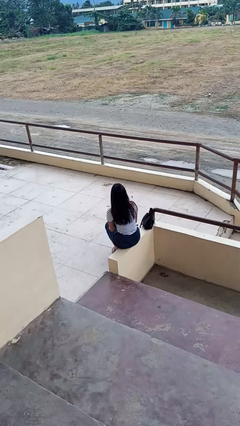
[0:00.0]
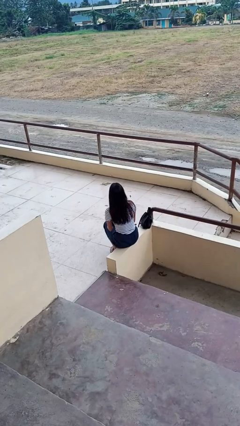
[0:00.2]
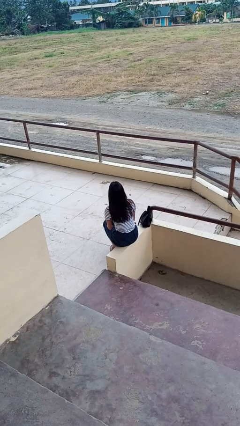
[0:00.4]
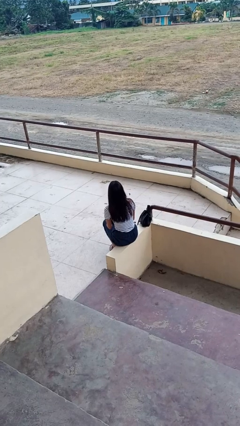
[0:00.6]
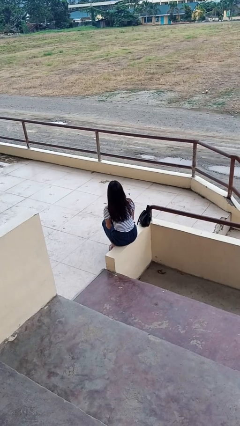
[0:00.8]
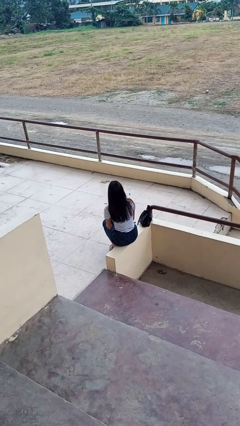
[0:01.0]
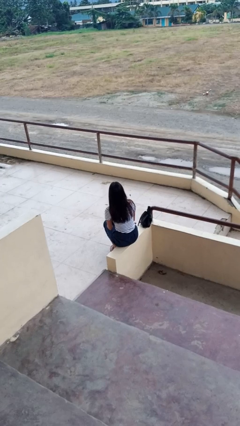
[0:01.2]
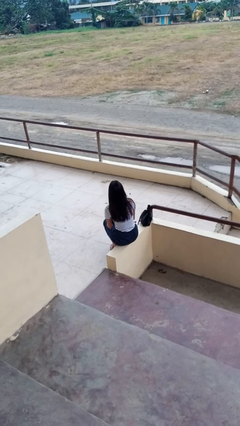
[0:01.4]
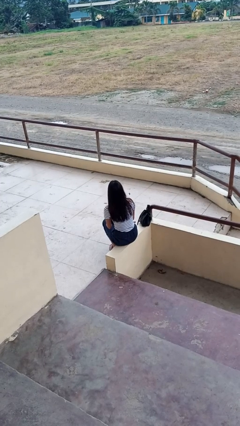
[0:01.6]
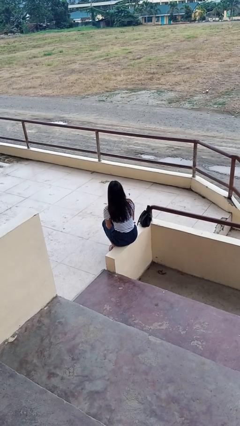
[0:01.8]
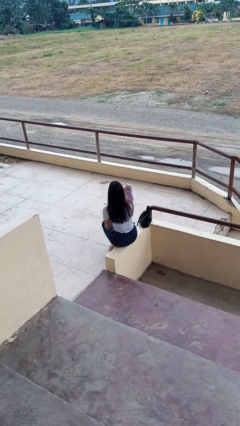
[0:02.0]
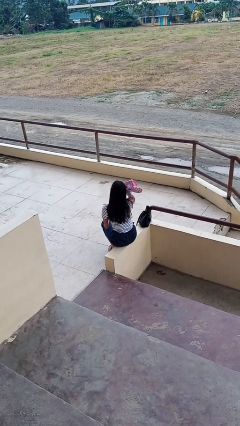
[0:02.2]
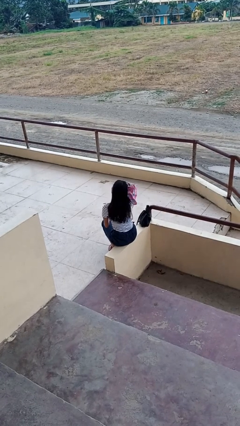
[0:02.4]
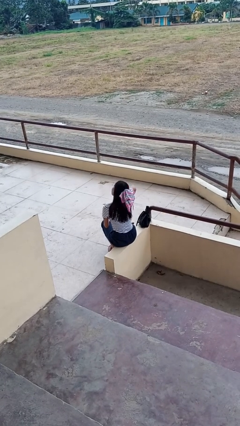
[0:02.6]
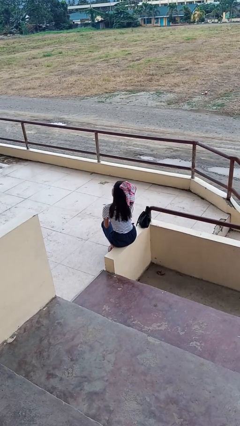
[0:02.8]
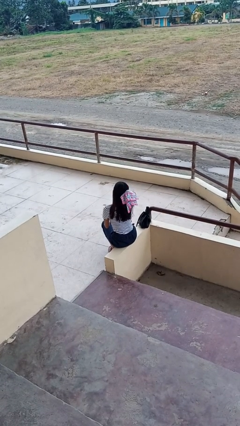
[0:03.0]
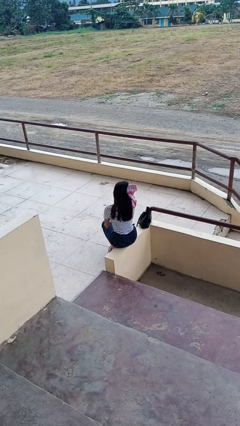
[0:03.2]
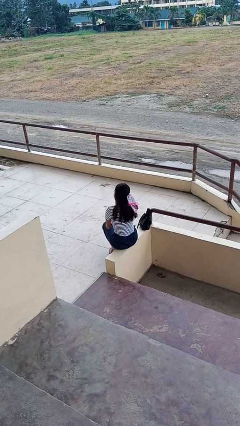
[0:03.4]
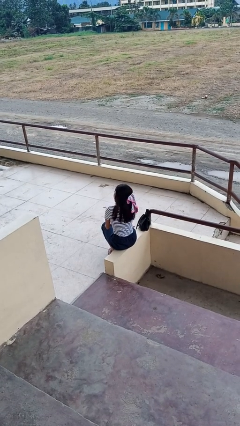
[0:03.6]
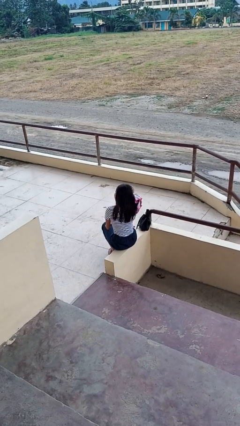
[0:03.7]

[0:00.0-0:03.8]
person dries hair with towel

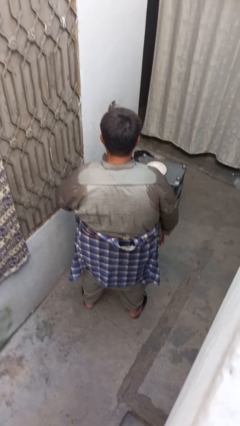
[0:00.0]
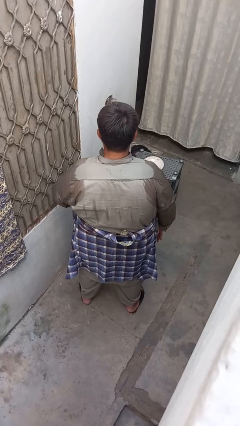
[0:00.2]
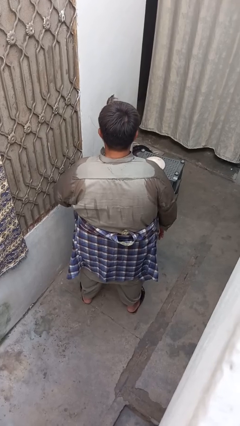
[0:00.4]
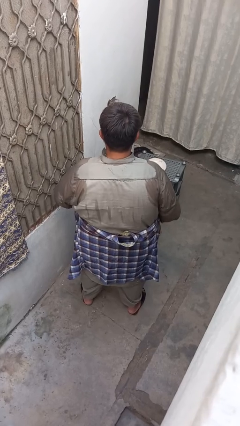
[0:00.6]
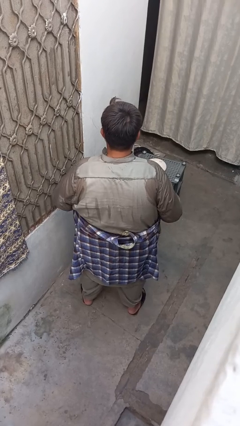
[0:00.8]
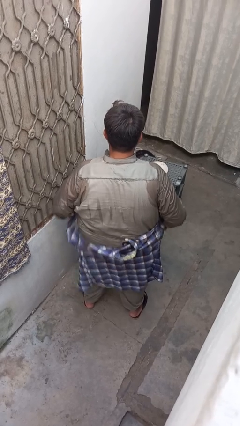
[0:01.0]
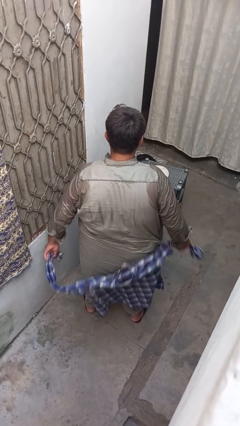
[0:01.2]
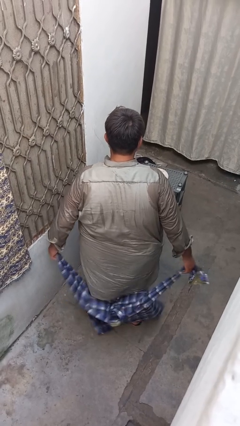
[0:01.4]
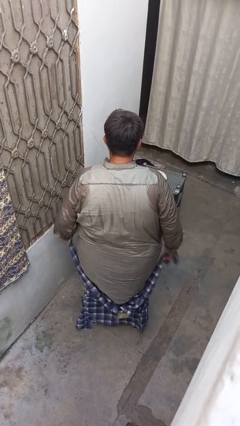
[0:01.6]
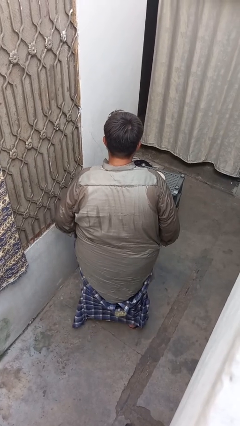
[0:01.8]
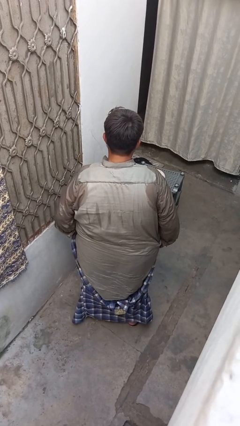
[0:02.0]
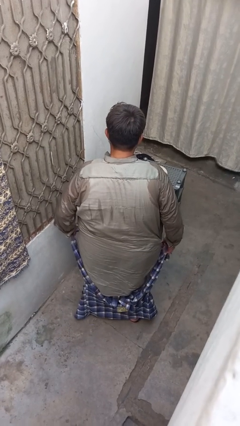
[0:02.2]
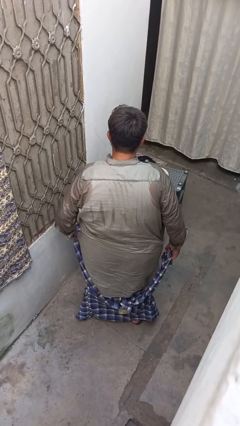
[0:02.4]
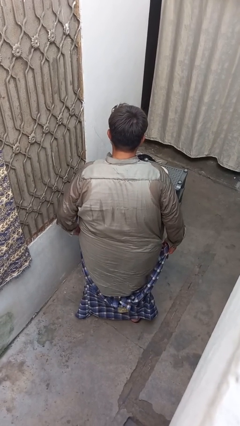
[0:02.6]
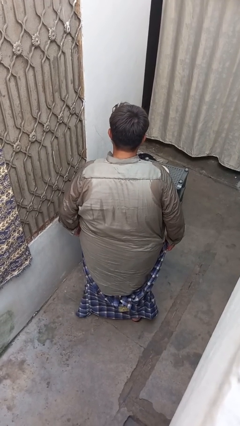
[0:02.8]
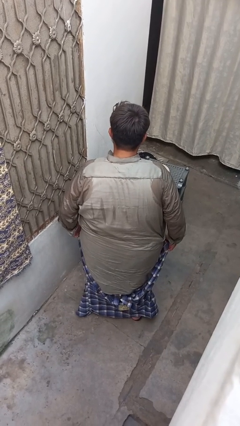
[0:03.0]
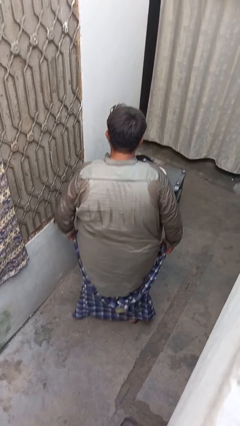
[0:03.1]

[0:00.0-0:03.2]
person unties jacket around waist

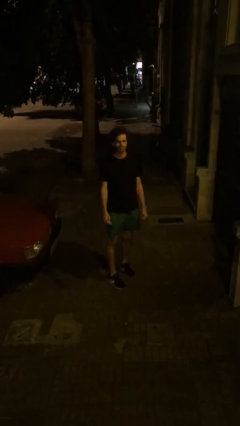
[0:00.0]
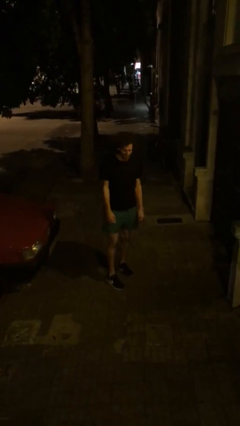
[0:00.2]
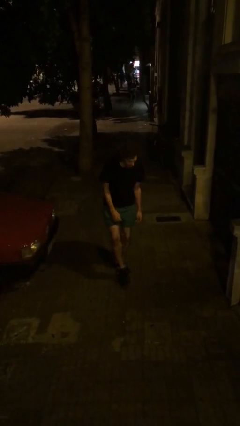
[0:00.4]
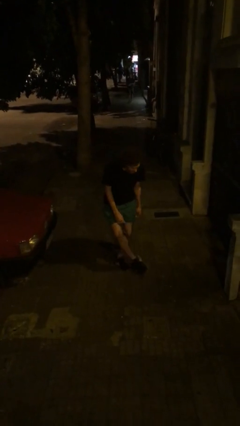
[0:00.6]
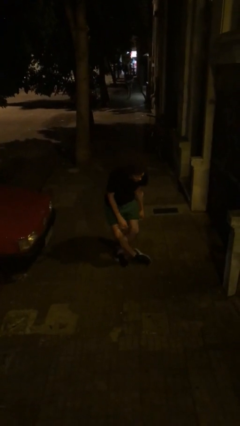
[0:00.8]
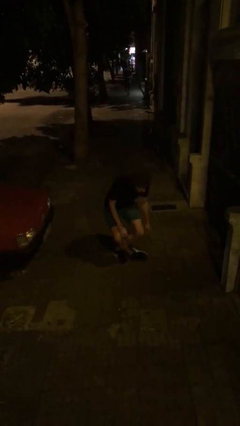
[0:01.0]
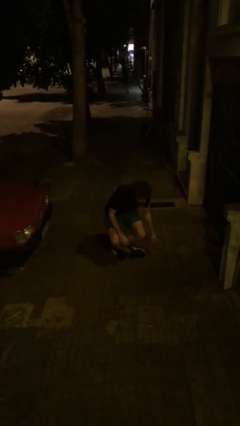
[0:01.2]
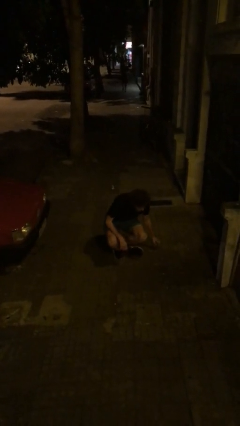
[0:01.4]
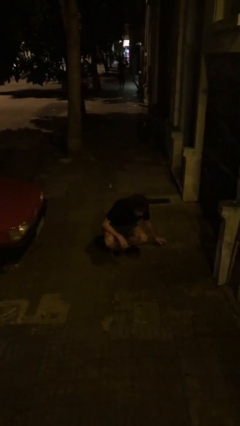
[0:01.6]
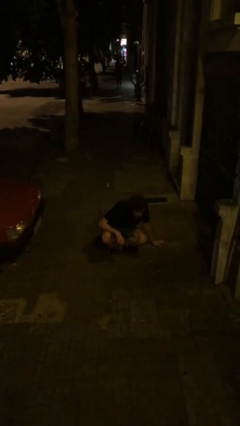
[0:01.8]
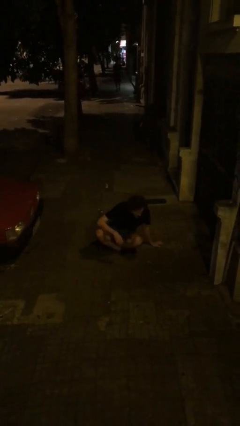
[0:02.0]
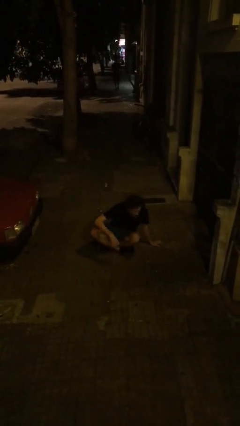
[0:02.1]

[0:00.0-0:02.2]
person sits down

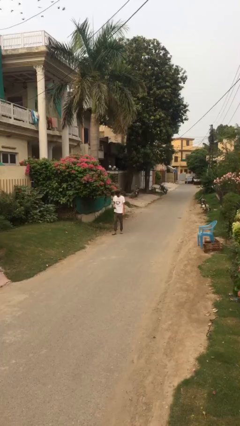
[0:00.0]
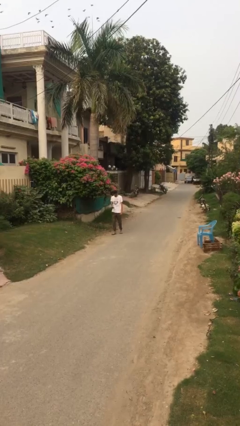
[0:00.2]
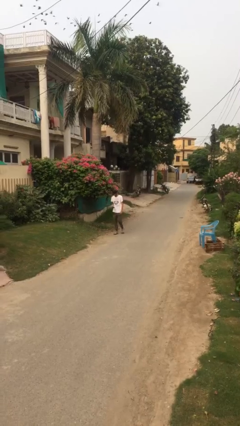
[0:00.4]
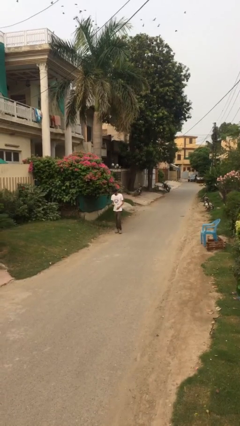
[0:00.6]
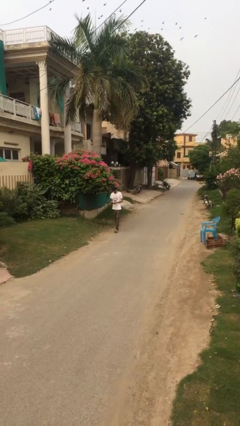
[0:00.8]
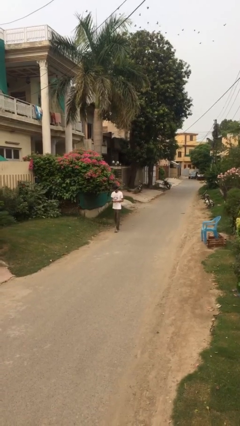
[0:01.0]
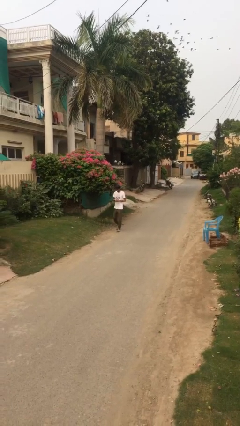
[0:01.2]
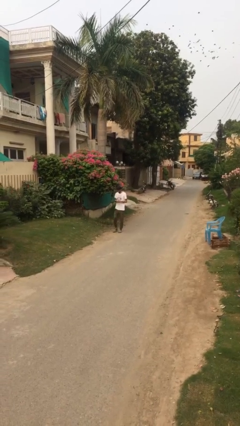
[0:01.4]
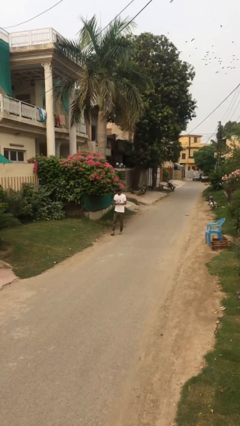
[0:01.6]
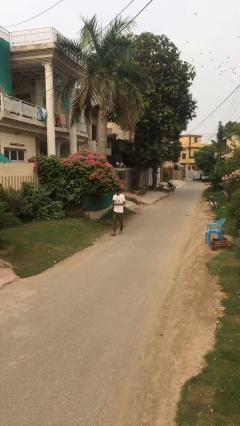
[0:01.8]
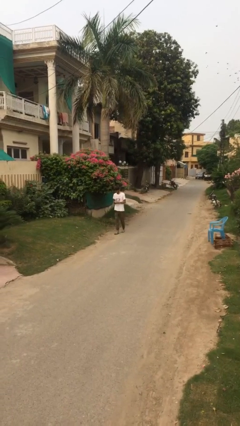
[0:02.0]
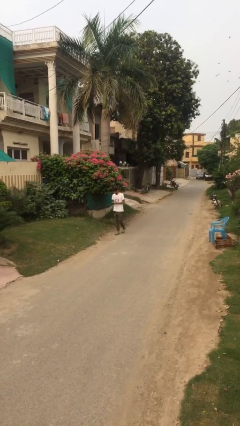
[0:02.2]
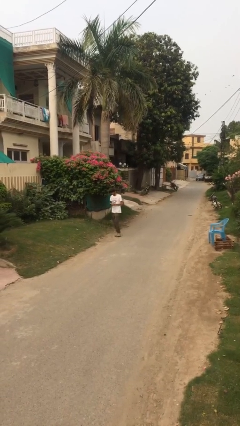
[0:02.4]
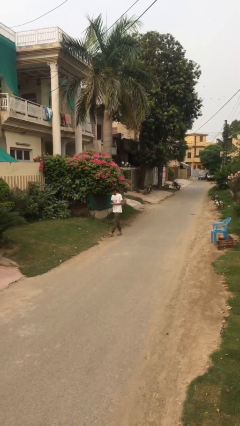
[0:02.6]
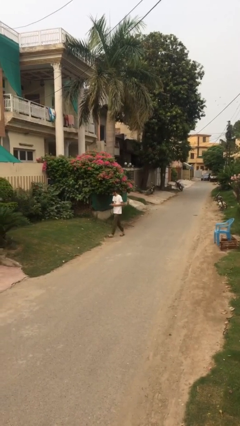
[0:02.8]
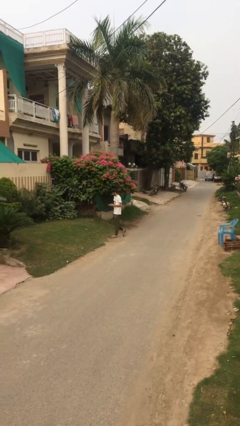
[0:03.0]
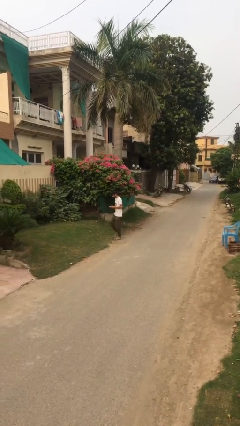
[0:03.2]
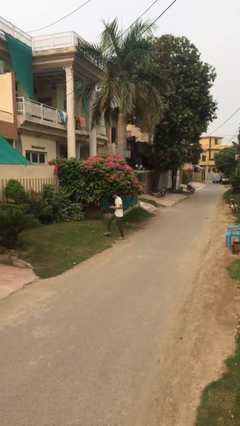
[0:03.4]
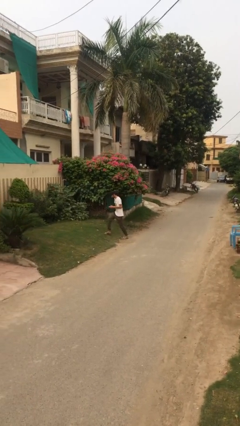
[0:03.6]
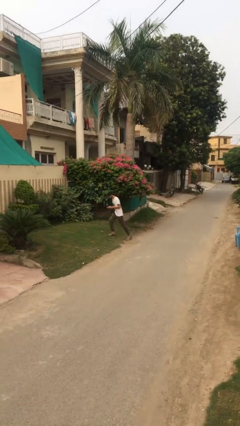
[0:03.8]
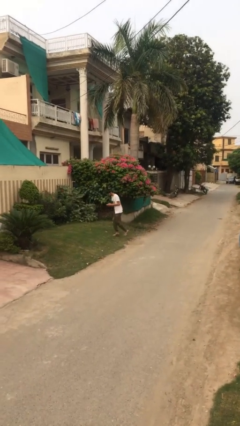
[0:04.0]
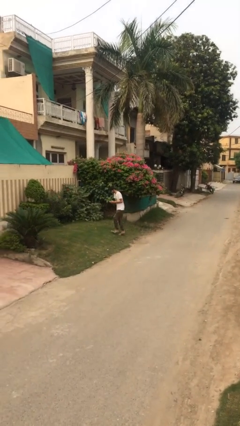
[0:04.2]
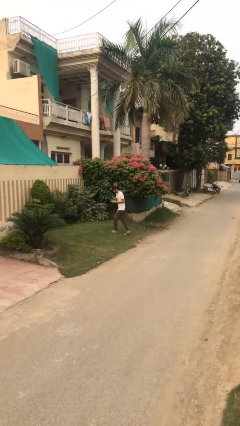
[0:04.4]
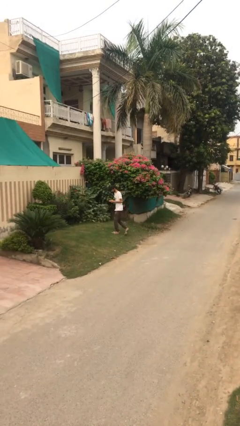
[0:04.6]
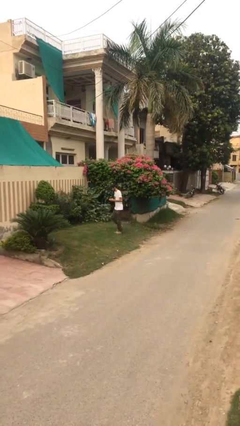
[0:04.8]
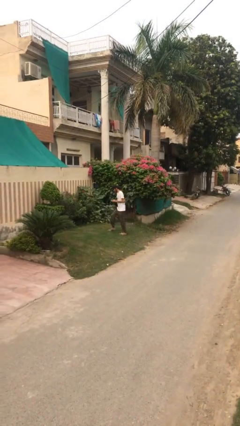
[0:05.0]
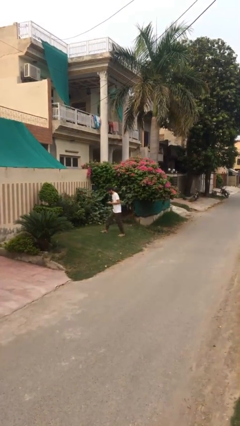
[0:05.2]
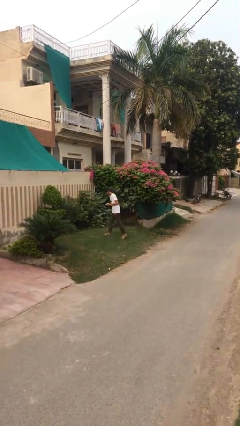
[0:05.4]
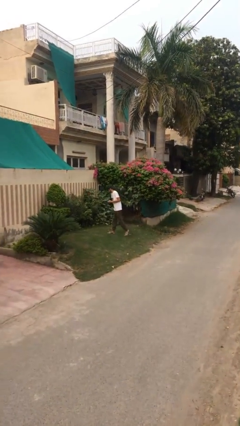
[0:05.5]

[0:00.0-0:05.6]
person texts on phone

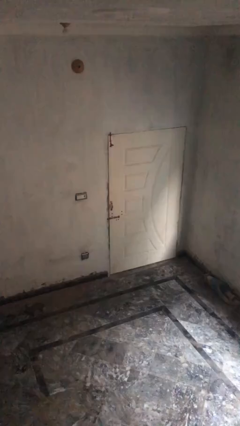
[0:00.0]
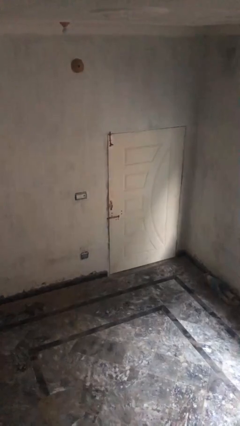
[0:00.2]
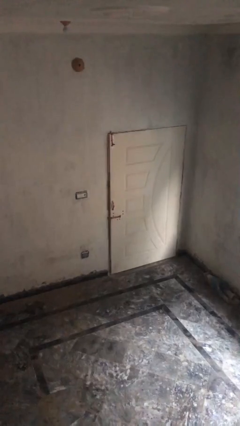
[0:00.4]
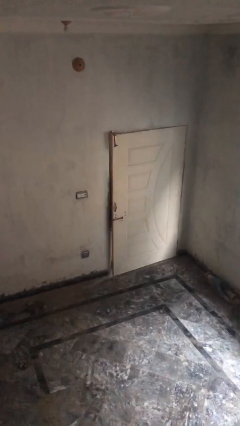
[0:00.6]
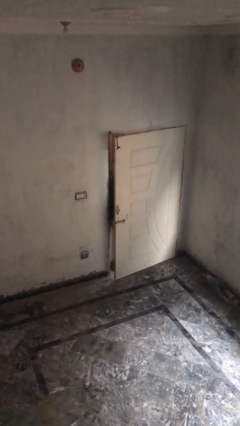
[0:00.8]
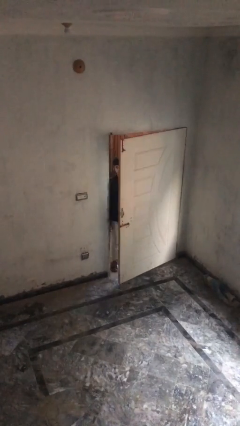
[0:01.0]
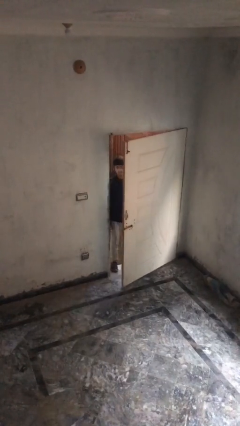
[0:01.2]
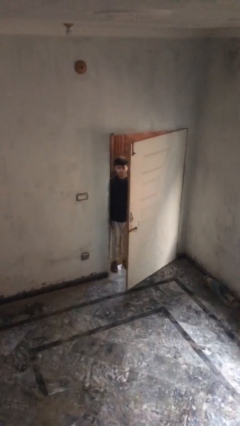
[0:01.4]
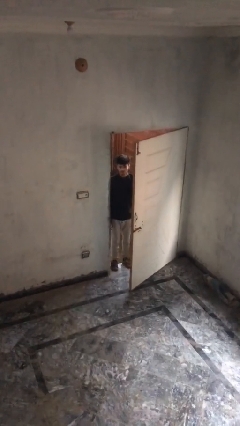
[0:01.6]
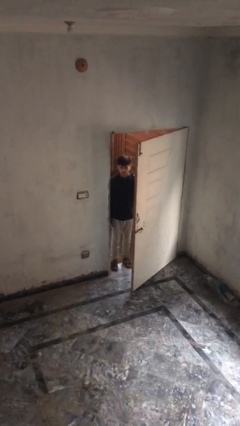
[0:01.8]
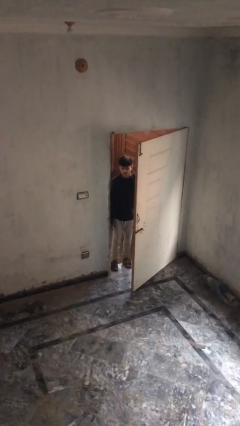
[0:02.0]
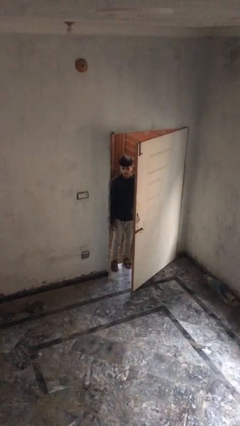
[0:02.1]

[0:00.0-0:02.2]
person opens facility door
